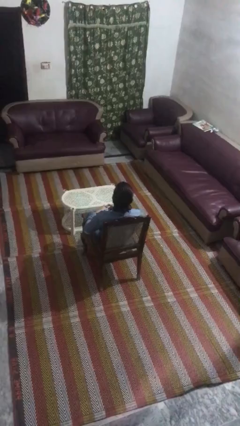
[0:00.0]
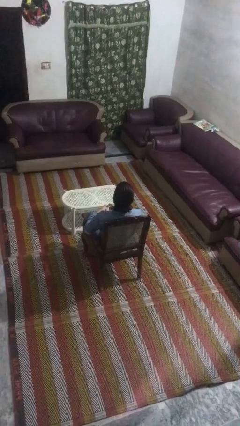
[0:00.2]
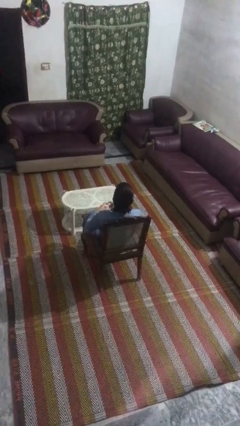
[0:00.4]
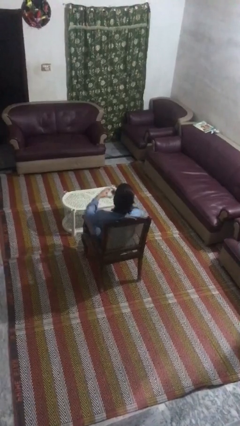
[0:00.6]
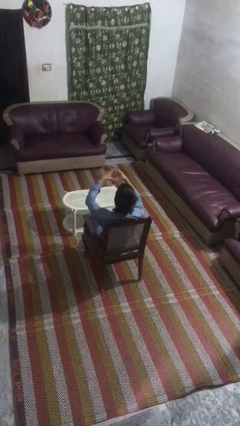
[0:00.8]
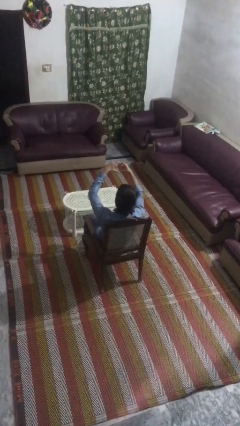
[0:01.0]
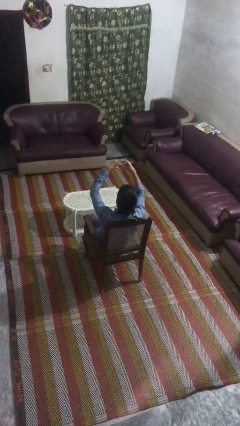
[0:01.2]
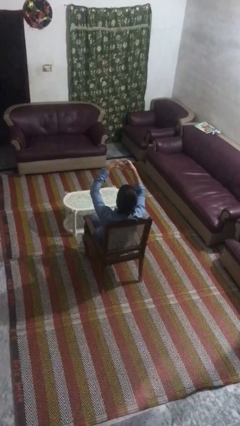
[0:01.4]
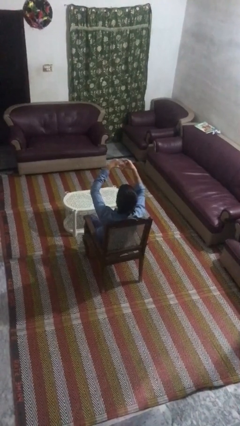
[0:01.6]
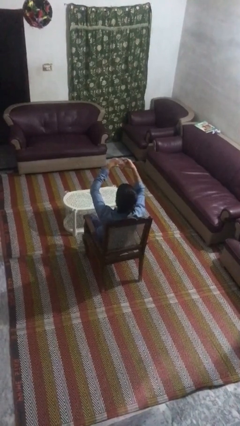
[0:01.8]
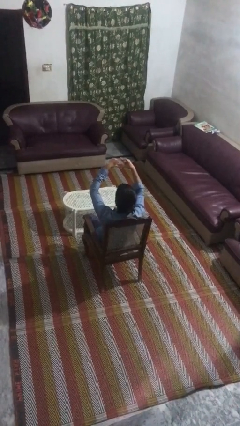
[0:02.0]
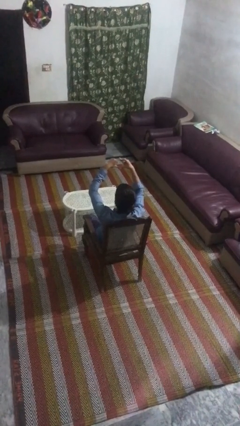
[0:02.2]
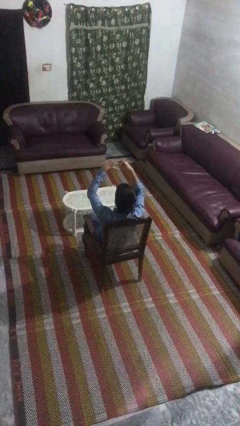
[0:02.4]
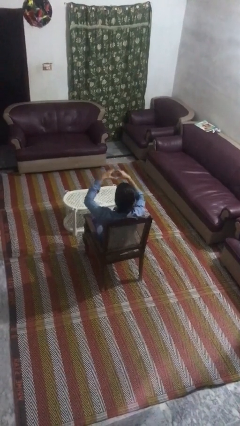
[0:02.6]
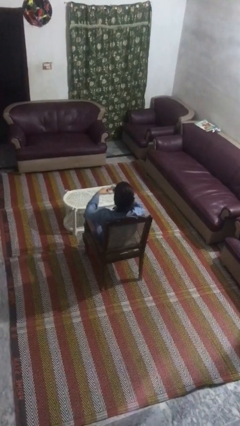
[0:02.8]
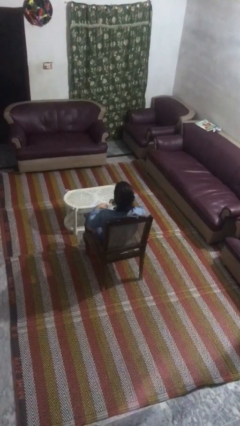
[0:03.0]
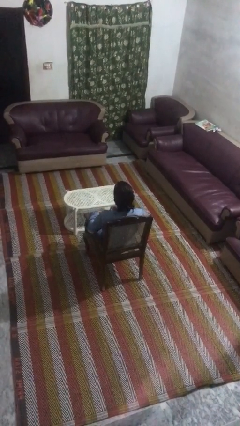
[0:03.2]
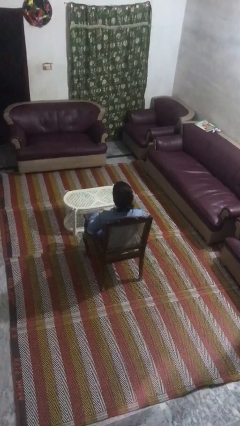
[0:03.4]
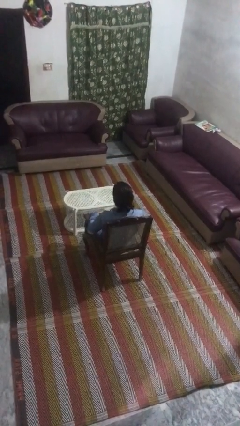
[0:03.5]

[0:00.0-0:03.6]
person gestures heart

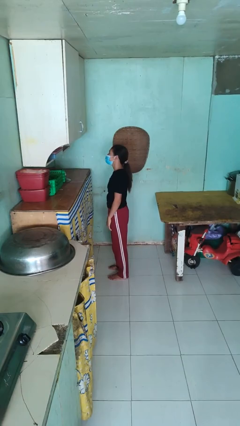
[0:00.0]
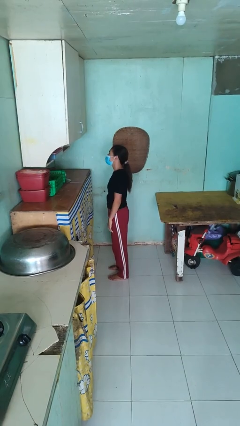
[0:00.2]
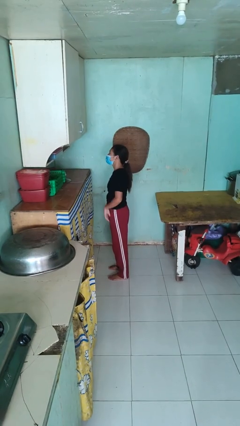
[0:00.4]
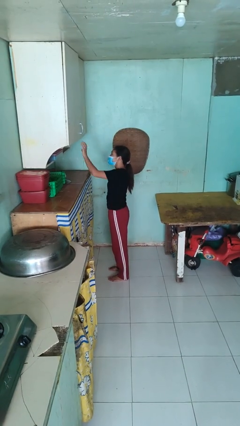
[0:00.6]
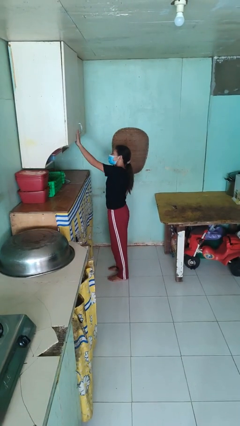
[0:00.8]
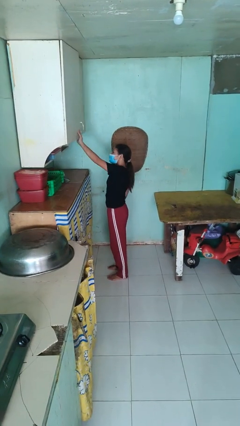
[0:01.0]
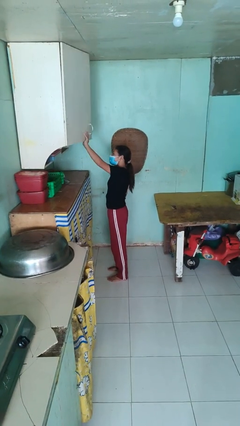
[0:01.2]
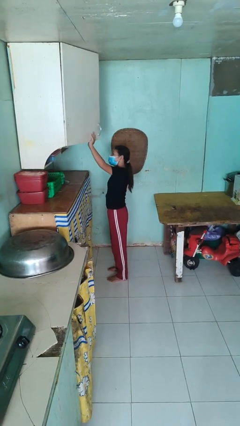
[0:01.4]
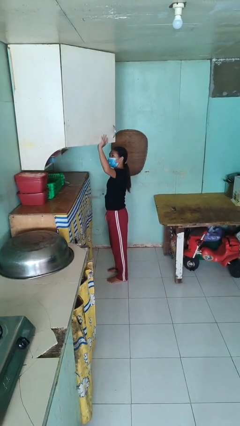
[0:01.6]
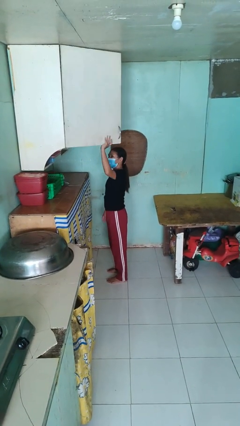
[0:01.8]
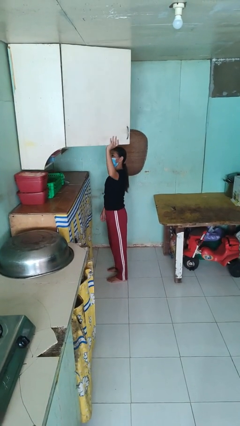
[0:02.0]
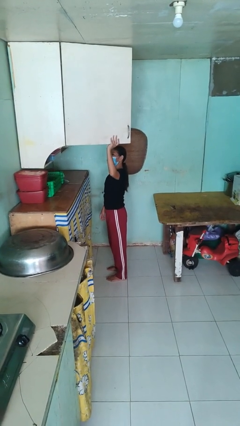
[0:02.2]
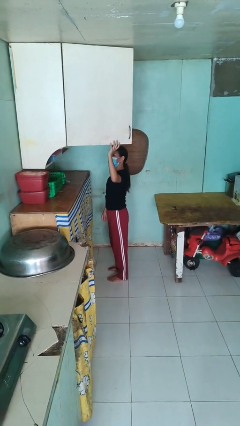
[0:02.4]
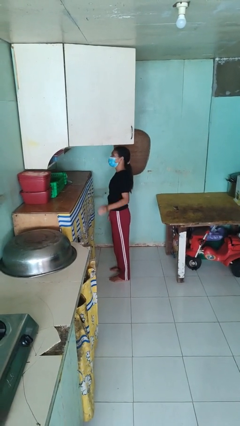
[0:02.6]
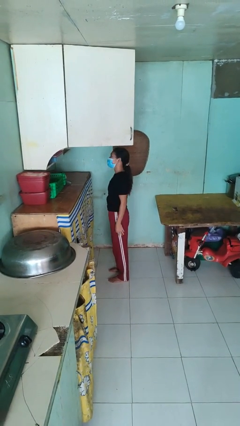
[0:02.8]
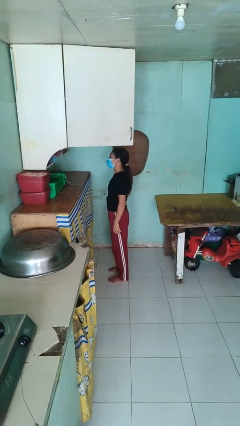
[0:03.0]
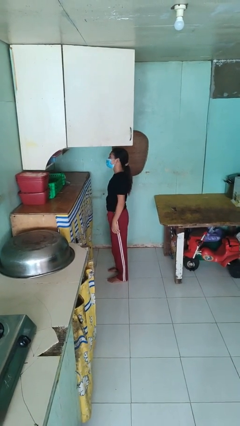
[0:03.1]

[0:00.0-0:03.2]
person opens cabinet

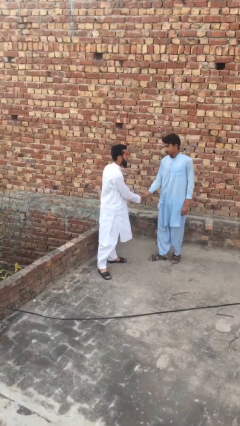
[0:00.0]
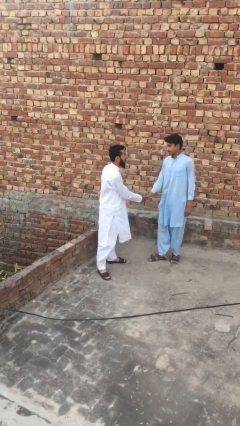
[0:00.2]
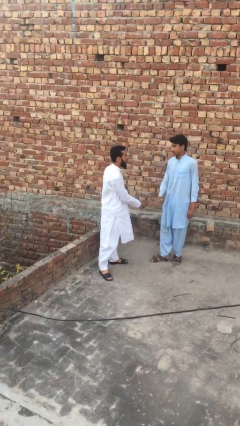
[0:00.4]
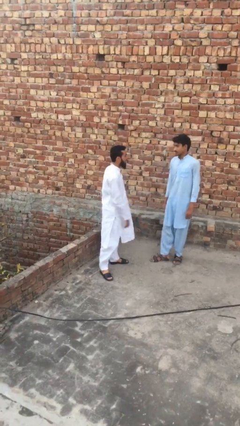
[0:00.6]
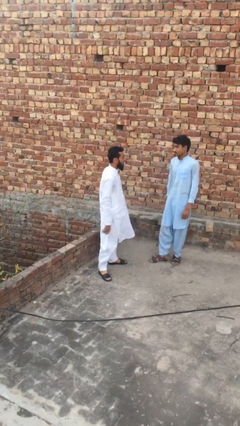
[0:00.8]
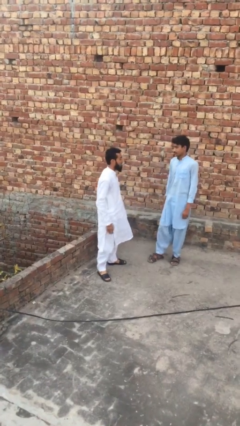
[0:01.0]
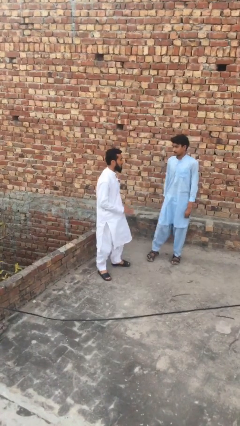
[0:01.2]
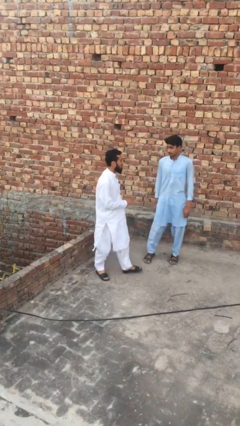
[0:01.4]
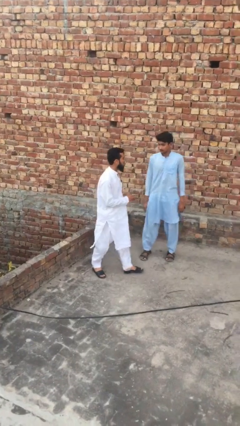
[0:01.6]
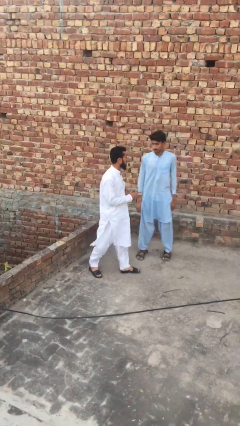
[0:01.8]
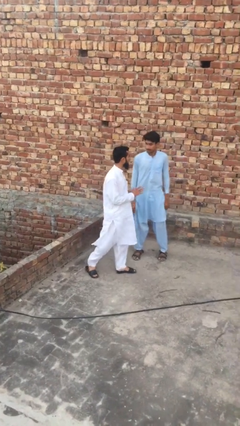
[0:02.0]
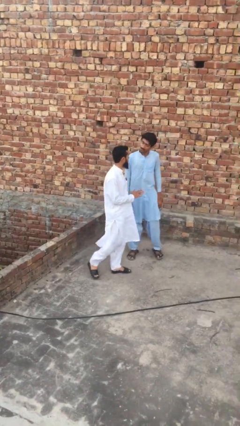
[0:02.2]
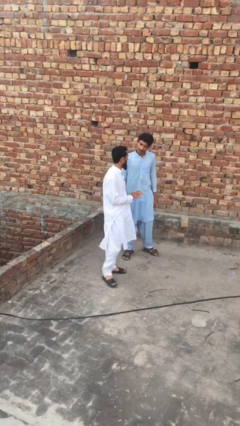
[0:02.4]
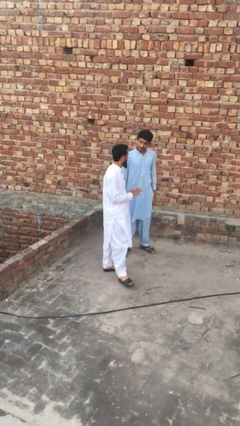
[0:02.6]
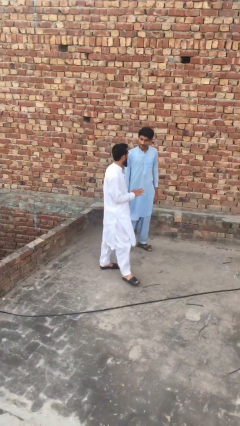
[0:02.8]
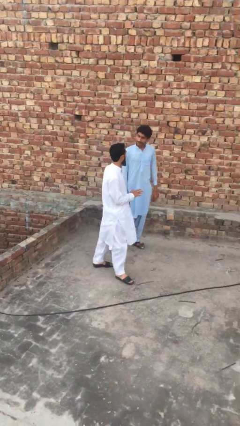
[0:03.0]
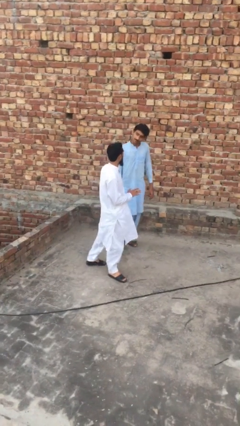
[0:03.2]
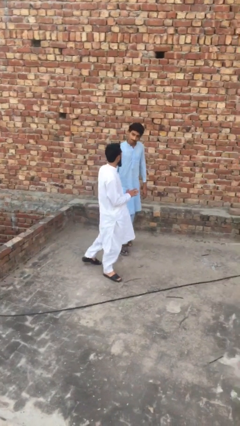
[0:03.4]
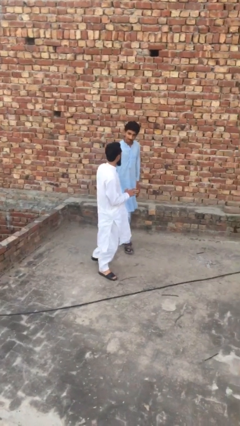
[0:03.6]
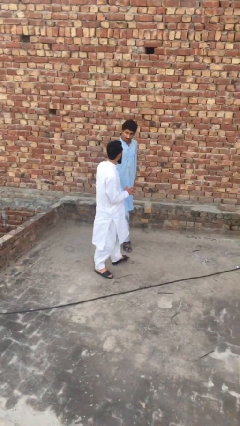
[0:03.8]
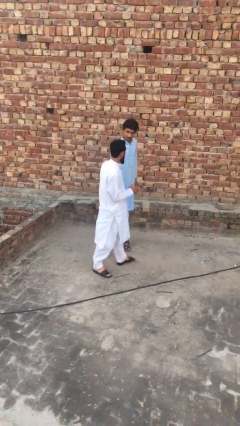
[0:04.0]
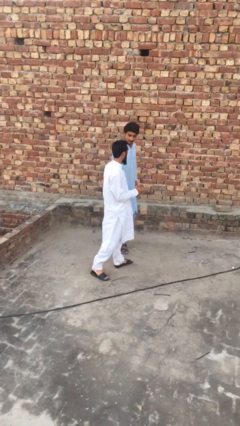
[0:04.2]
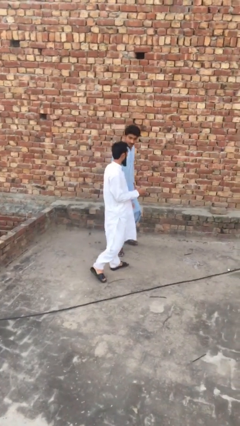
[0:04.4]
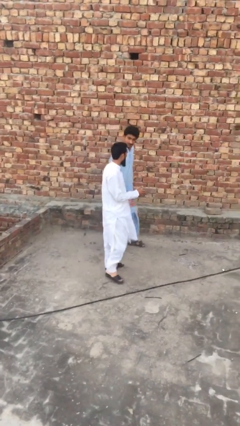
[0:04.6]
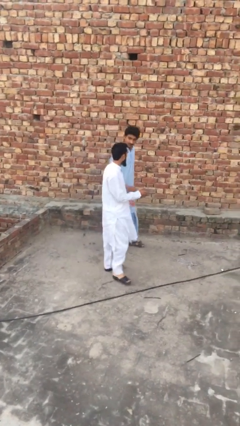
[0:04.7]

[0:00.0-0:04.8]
person talks to person

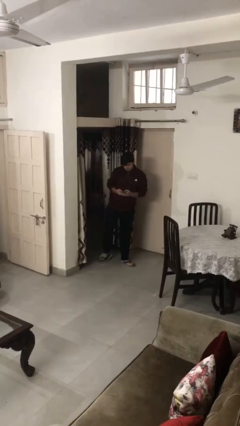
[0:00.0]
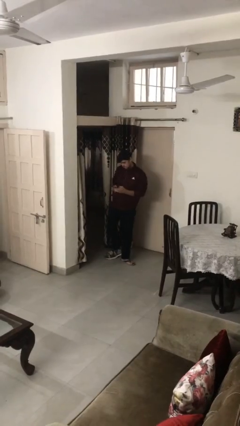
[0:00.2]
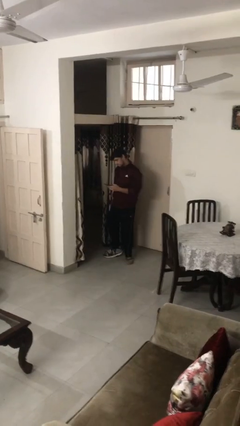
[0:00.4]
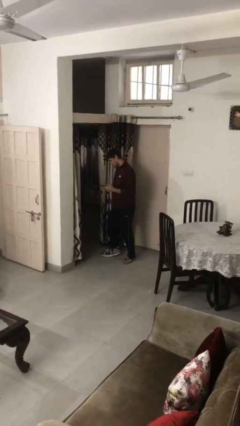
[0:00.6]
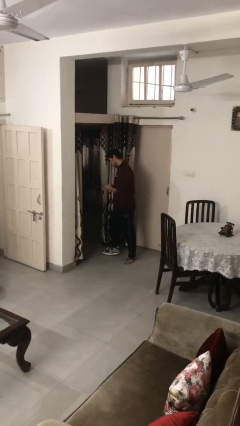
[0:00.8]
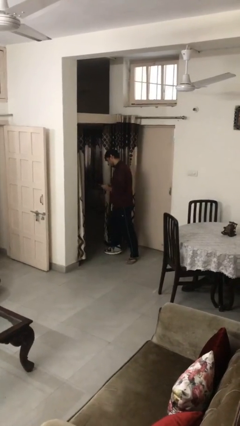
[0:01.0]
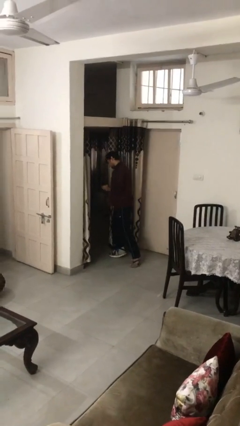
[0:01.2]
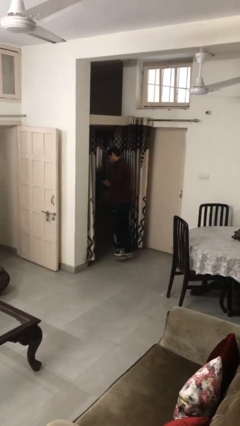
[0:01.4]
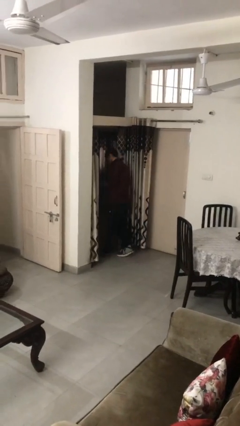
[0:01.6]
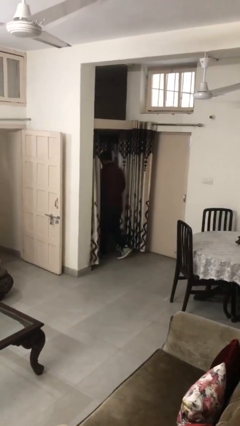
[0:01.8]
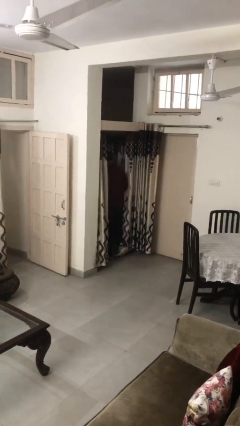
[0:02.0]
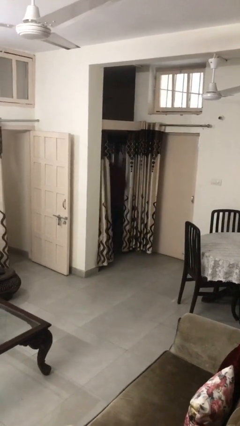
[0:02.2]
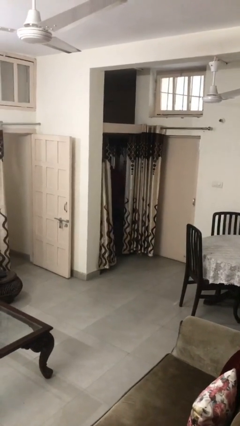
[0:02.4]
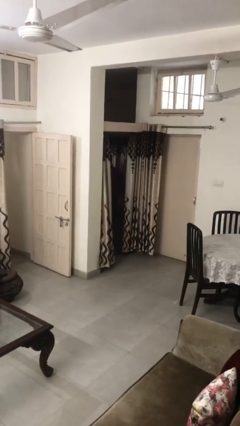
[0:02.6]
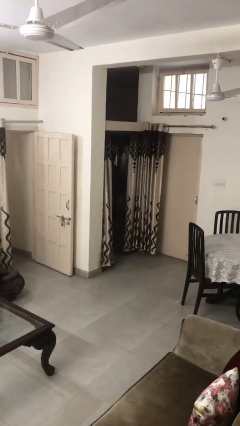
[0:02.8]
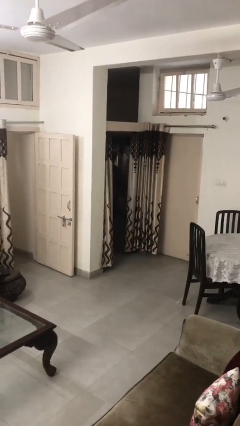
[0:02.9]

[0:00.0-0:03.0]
person exits scene through structure

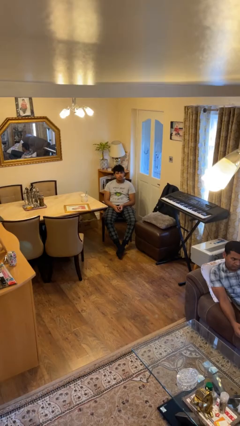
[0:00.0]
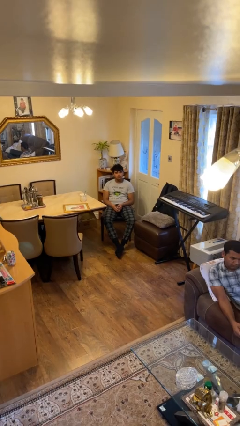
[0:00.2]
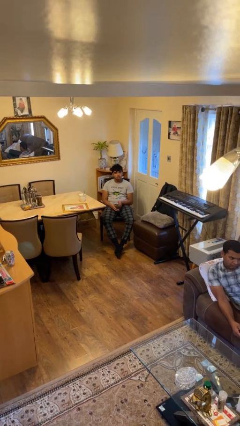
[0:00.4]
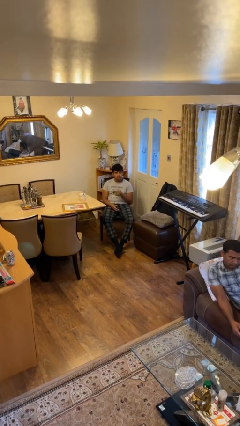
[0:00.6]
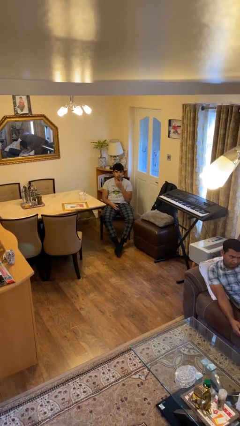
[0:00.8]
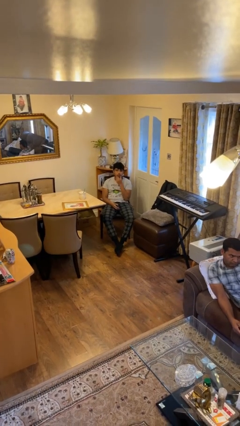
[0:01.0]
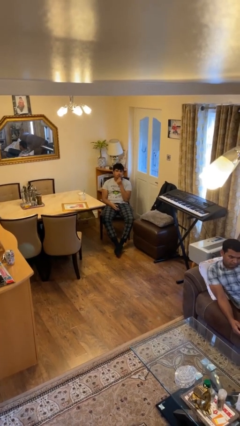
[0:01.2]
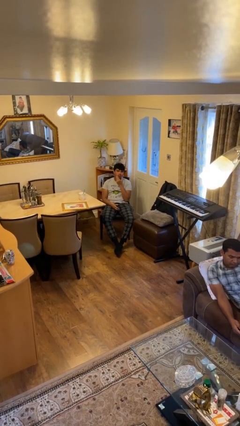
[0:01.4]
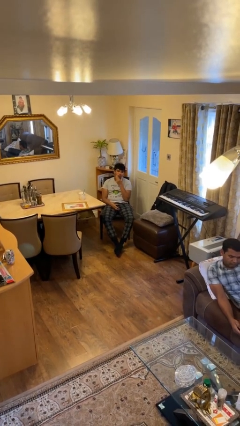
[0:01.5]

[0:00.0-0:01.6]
person strokes chin

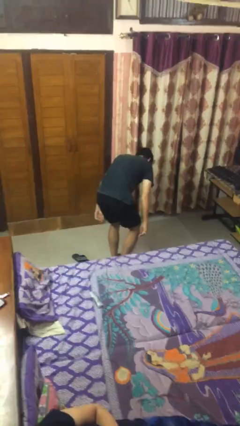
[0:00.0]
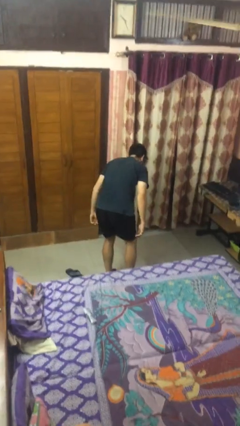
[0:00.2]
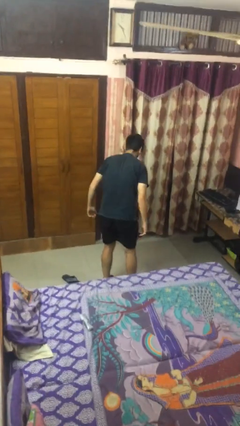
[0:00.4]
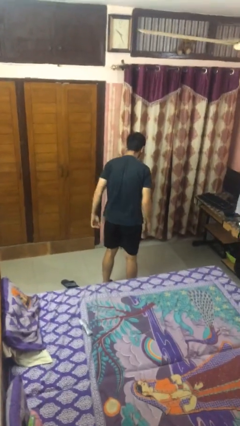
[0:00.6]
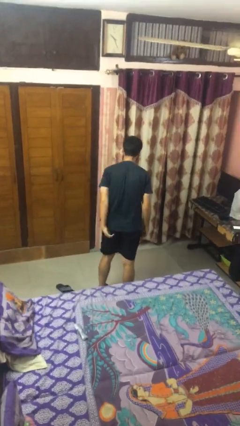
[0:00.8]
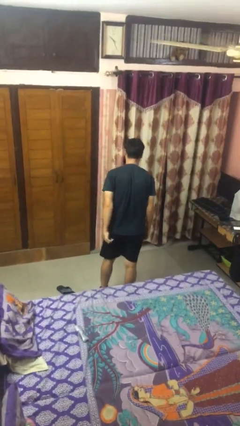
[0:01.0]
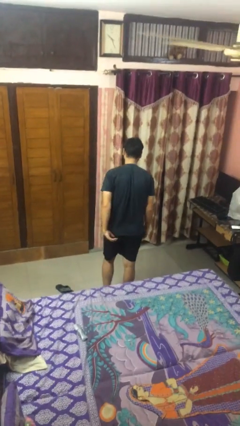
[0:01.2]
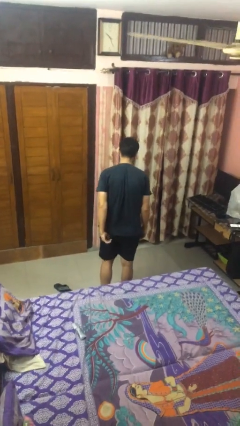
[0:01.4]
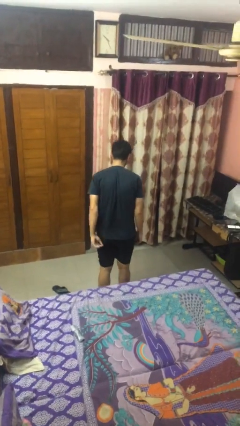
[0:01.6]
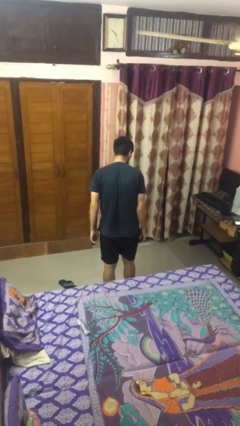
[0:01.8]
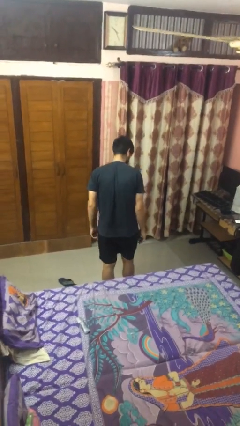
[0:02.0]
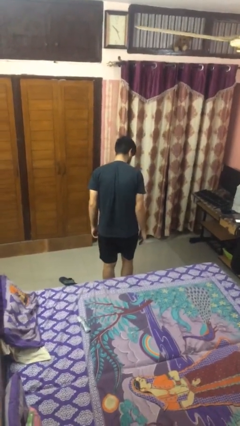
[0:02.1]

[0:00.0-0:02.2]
person stands up from floor
